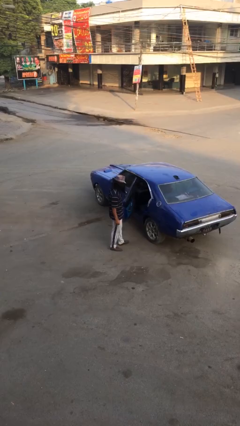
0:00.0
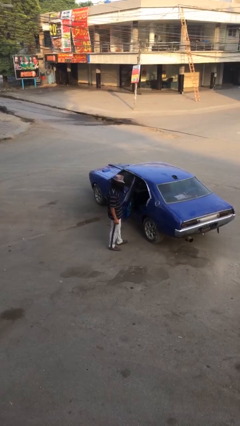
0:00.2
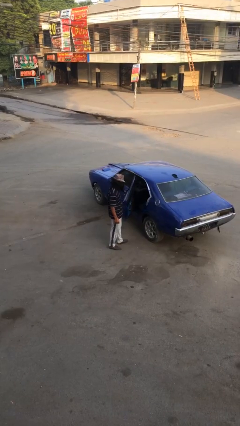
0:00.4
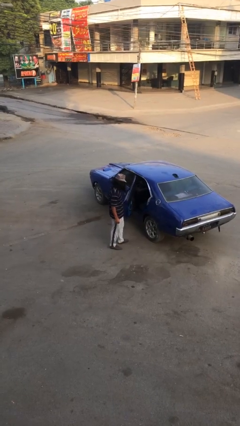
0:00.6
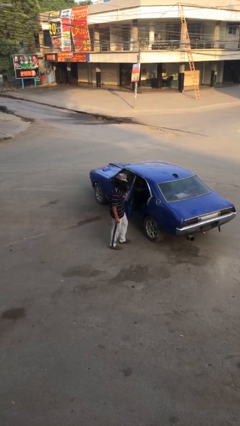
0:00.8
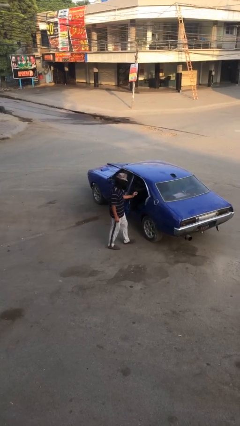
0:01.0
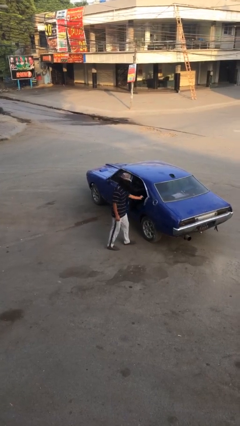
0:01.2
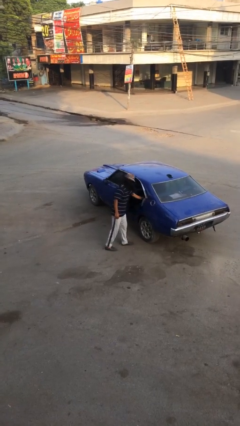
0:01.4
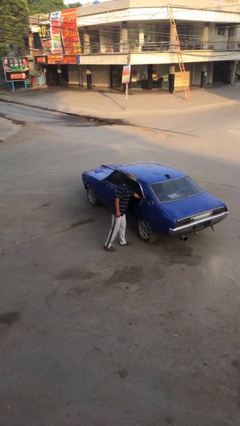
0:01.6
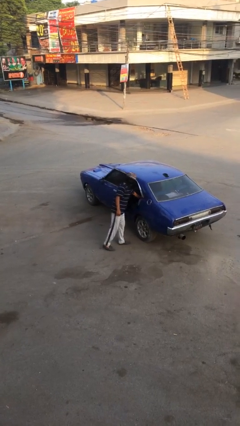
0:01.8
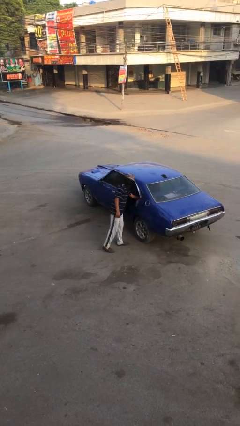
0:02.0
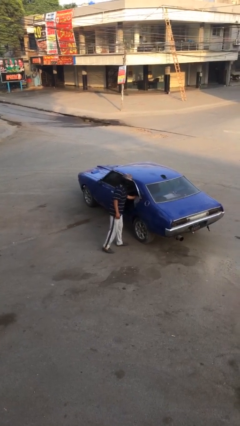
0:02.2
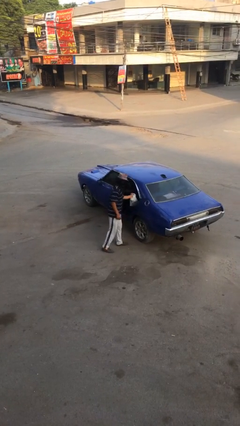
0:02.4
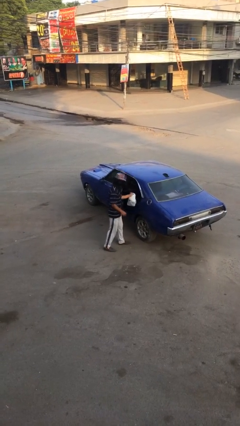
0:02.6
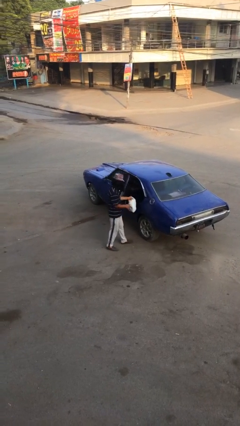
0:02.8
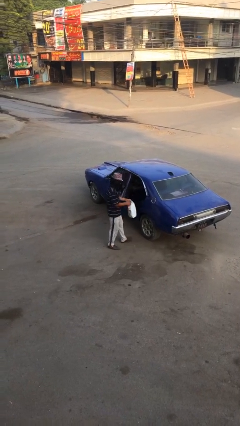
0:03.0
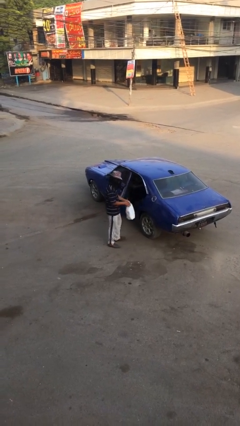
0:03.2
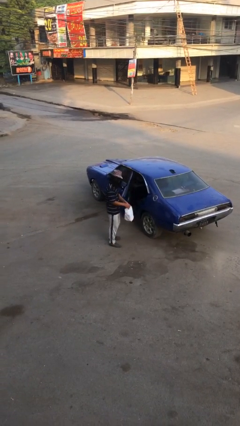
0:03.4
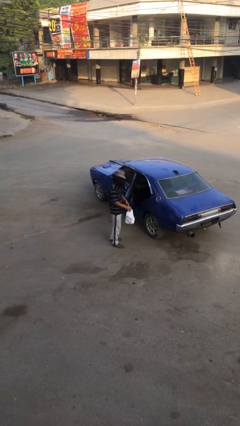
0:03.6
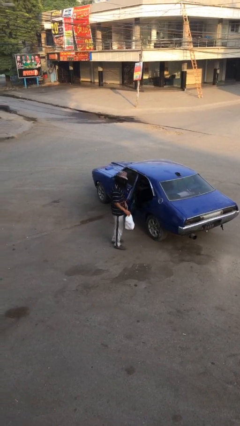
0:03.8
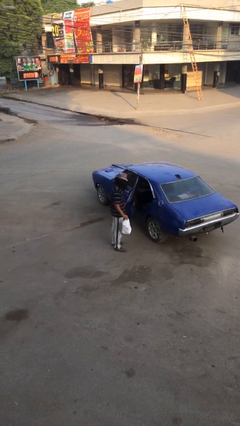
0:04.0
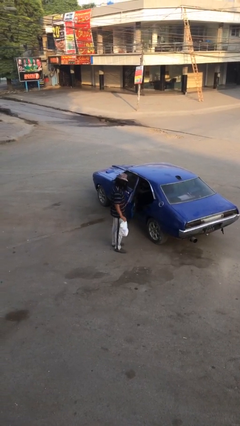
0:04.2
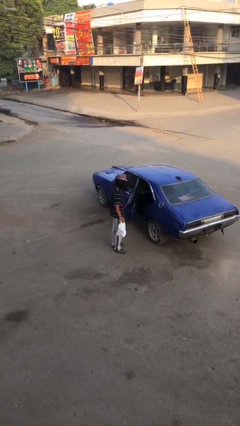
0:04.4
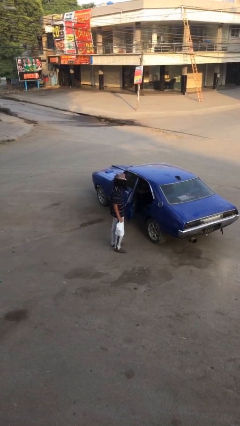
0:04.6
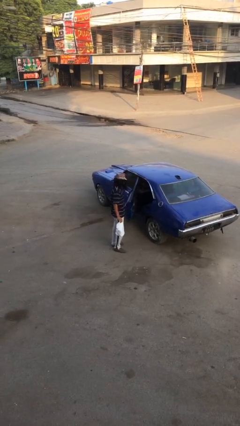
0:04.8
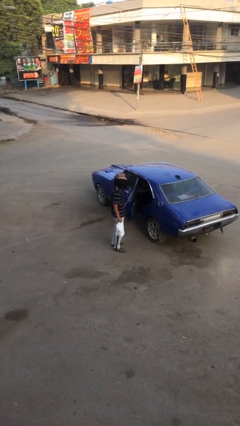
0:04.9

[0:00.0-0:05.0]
person unloads car

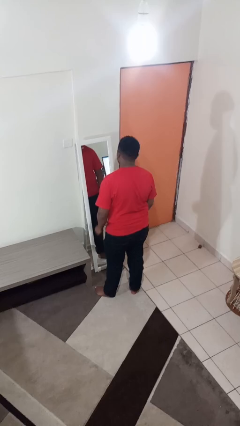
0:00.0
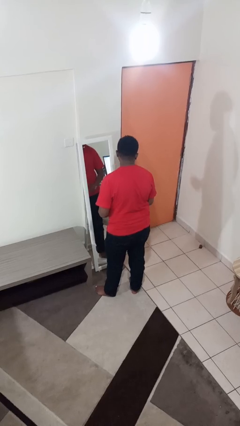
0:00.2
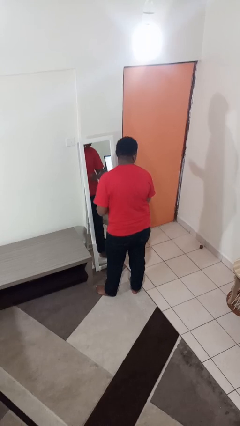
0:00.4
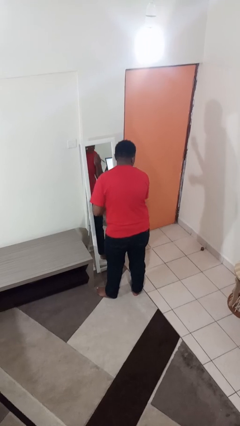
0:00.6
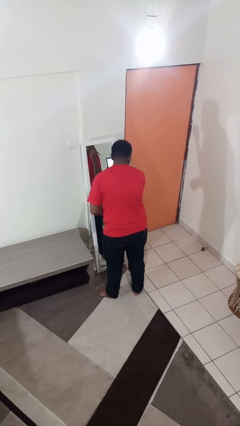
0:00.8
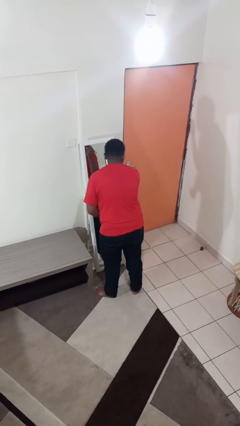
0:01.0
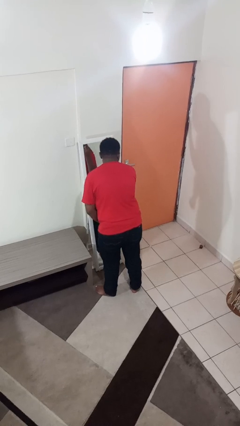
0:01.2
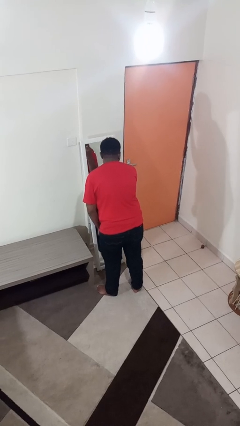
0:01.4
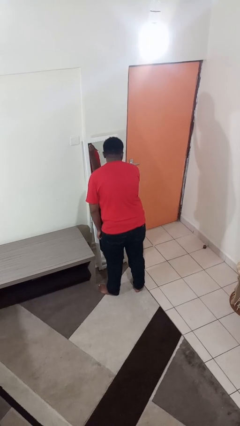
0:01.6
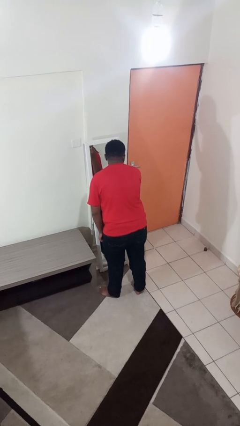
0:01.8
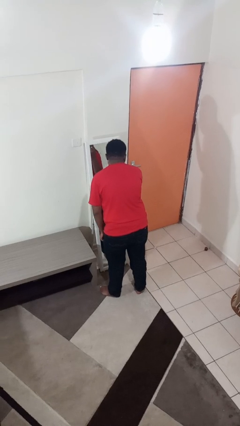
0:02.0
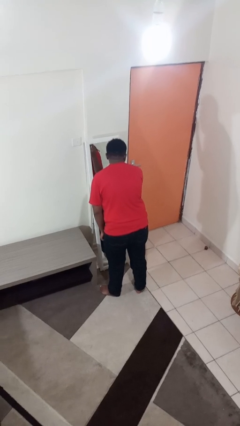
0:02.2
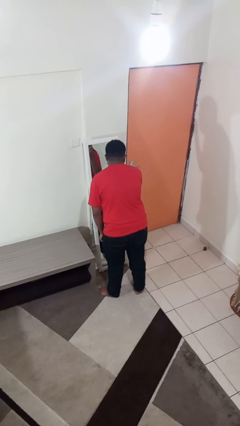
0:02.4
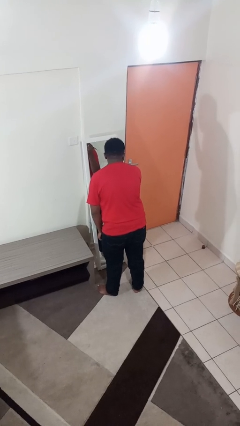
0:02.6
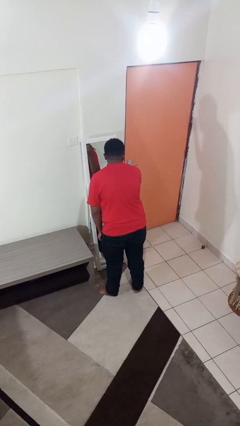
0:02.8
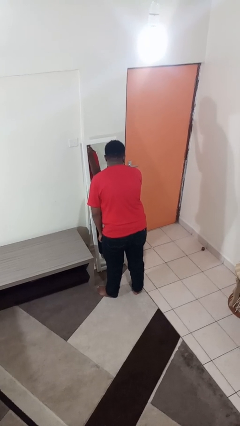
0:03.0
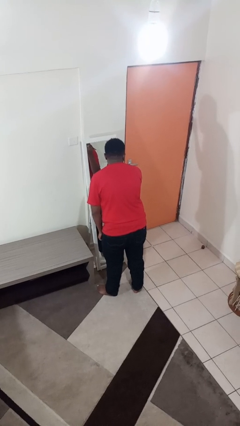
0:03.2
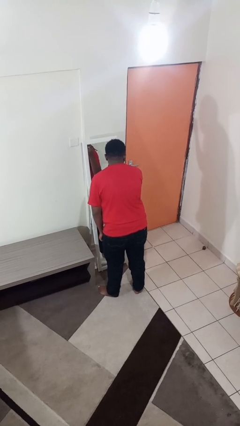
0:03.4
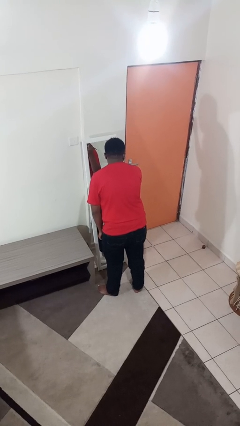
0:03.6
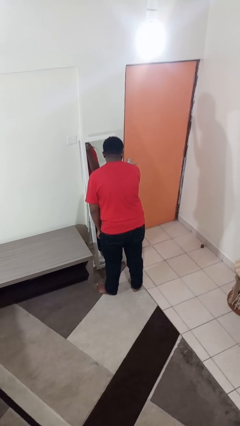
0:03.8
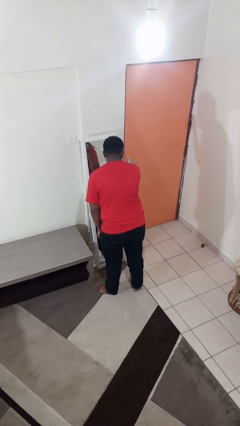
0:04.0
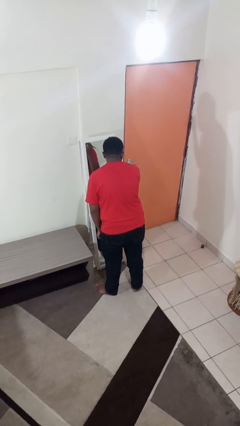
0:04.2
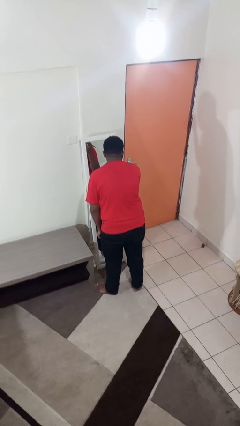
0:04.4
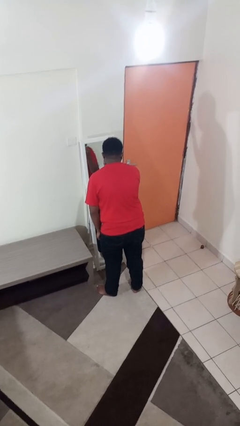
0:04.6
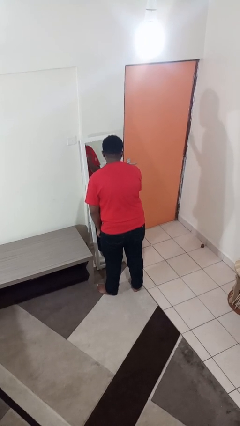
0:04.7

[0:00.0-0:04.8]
person applies eye makeup

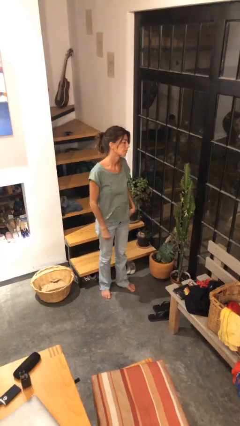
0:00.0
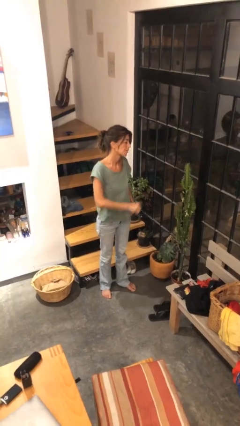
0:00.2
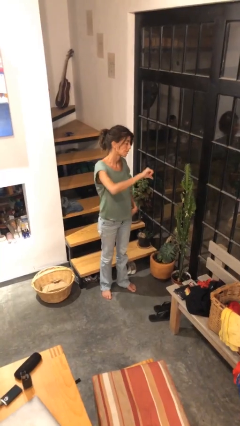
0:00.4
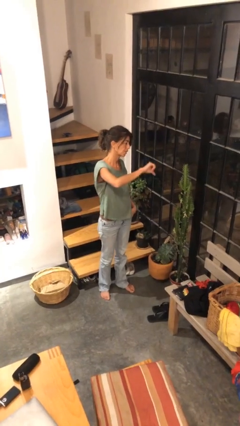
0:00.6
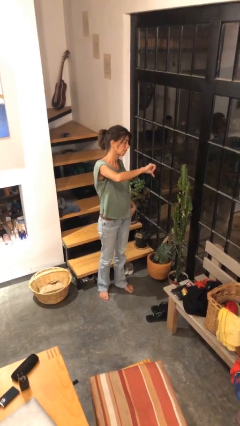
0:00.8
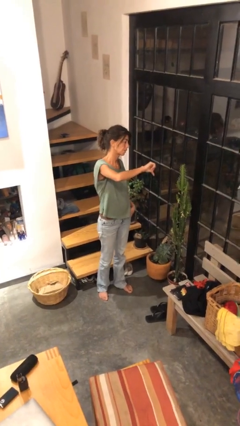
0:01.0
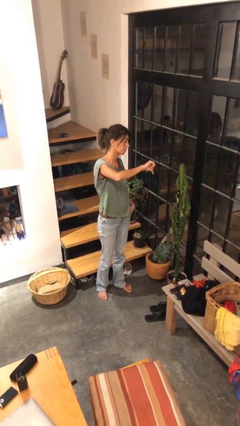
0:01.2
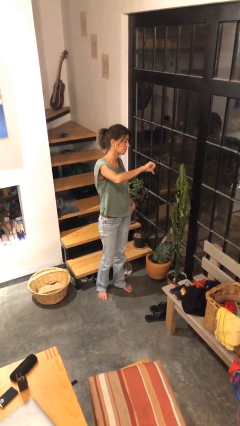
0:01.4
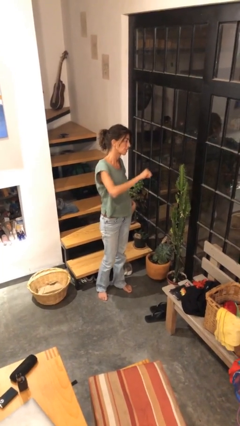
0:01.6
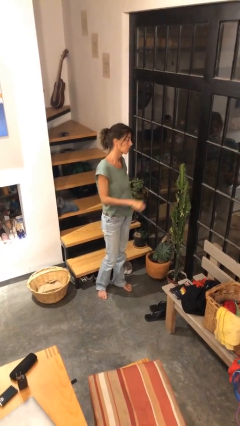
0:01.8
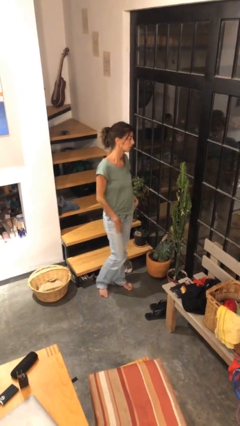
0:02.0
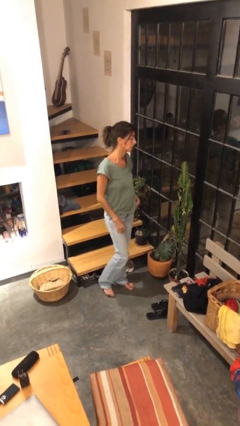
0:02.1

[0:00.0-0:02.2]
person gestures thumbs down

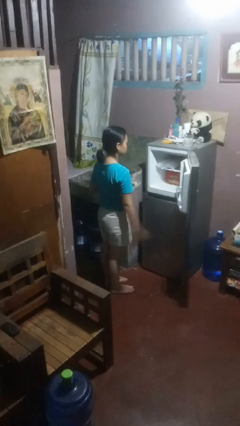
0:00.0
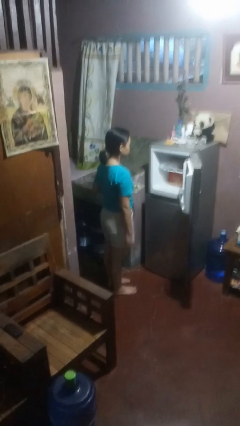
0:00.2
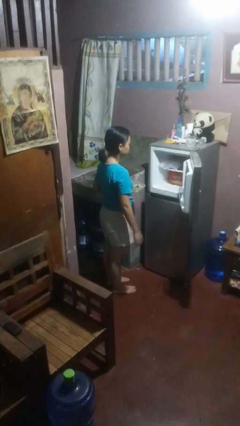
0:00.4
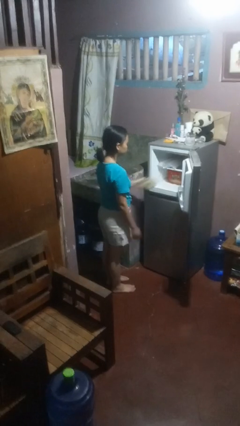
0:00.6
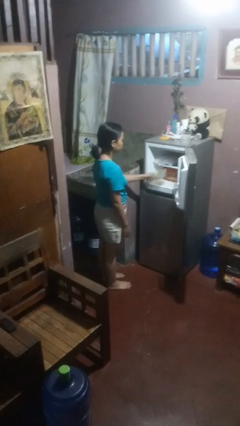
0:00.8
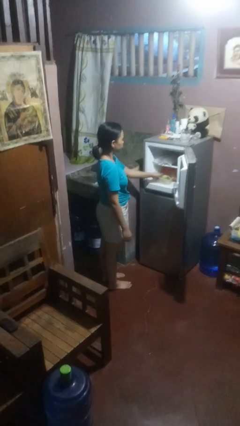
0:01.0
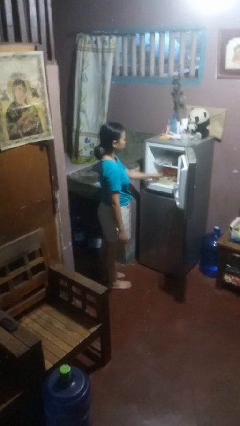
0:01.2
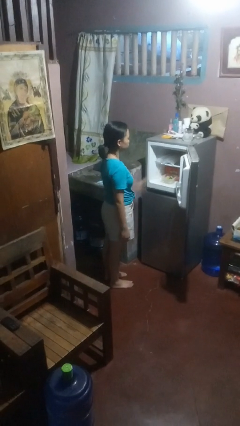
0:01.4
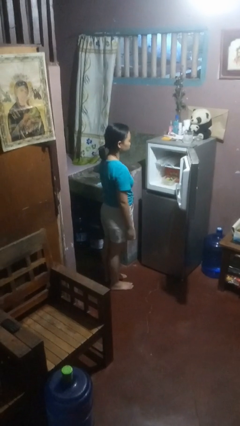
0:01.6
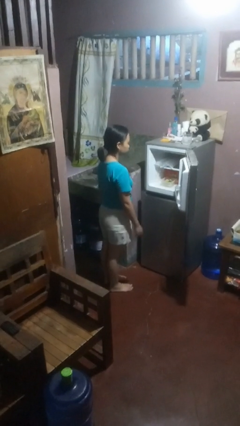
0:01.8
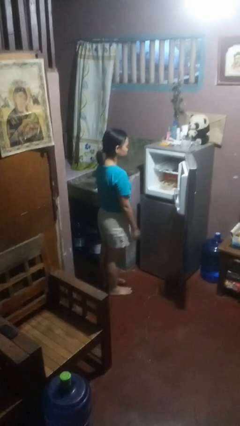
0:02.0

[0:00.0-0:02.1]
person puts object into refrigerator

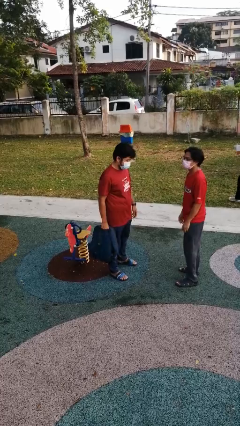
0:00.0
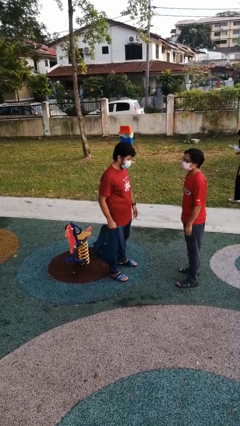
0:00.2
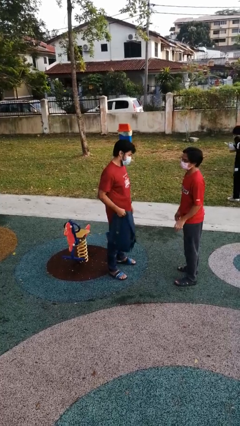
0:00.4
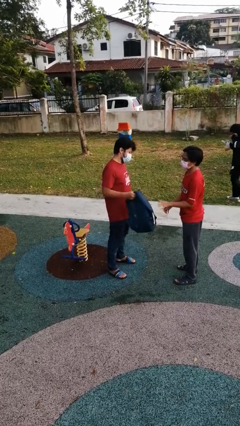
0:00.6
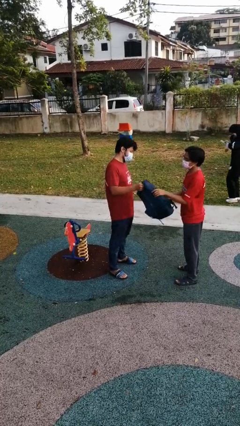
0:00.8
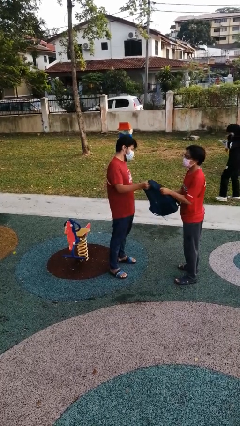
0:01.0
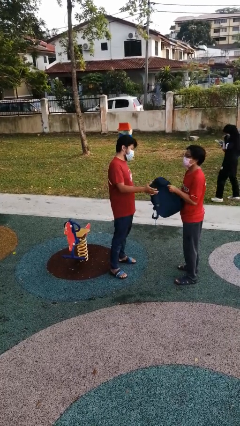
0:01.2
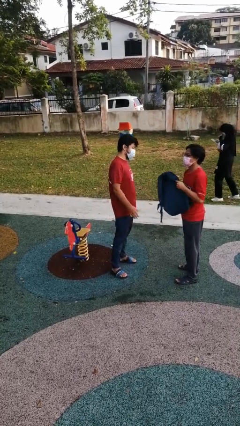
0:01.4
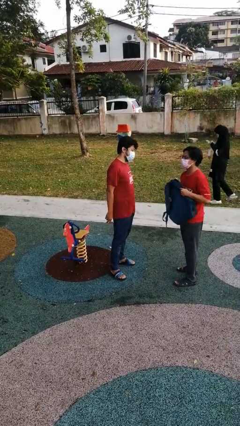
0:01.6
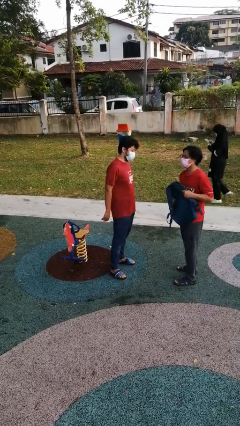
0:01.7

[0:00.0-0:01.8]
person transfers object to person

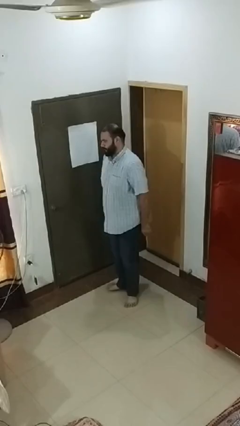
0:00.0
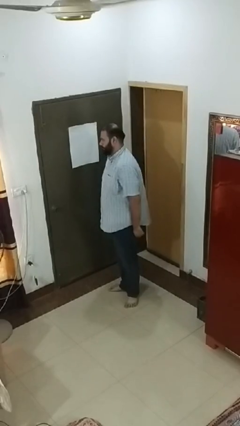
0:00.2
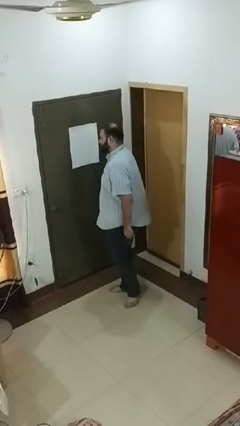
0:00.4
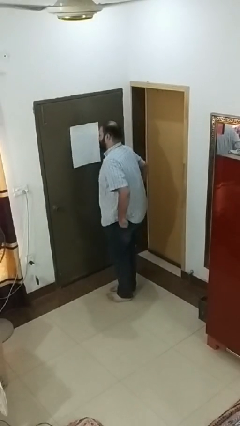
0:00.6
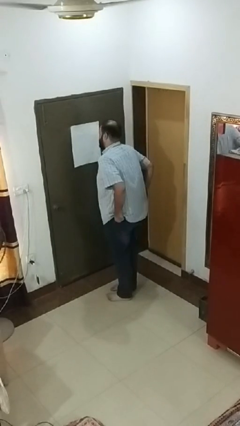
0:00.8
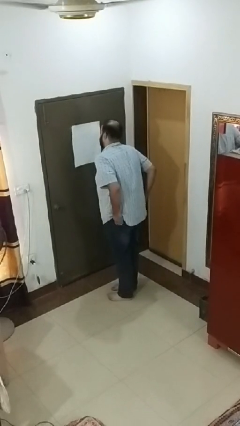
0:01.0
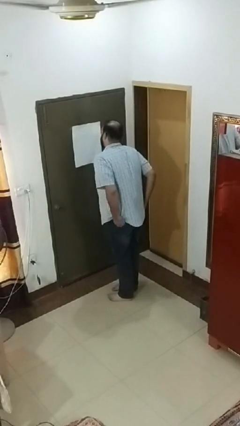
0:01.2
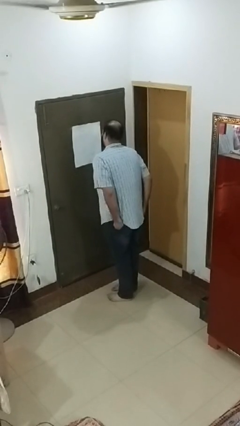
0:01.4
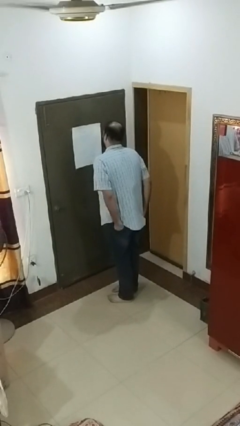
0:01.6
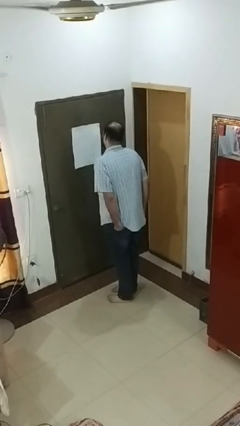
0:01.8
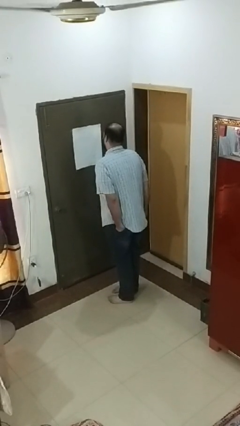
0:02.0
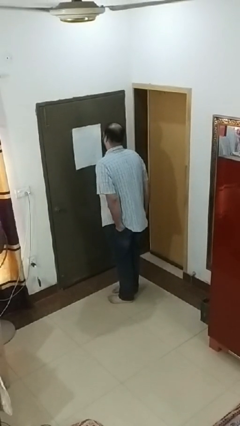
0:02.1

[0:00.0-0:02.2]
person puts hands in back pockets
